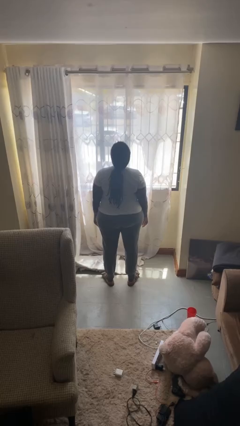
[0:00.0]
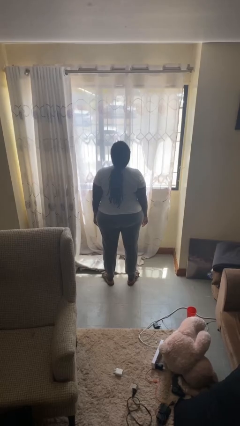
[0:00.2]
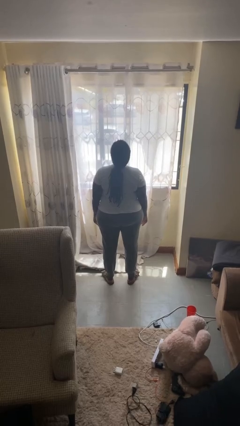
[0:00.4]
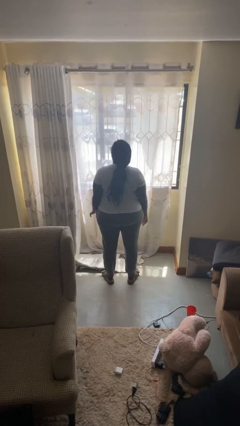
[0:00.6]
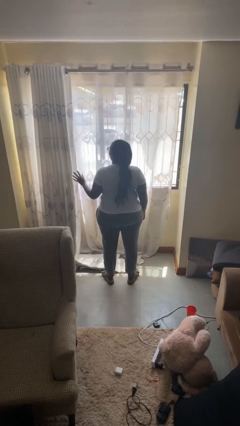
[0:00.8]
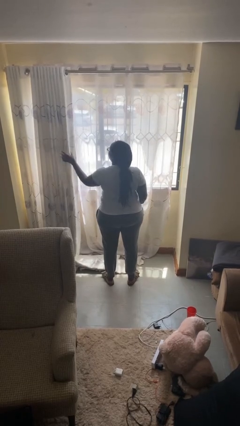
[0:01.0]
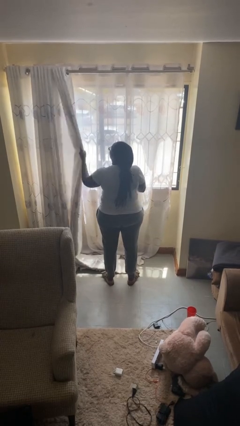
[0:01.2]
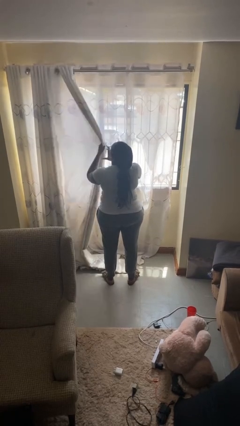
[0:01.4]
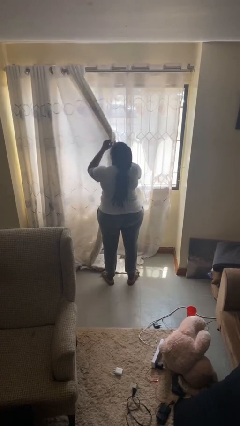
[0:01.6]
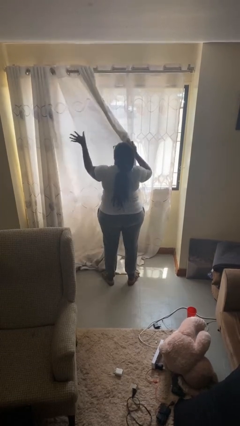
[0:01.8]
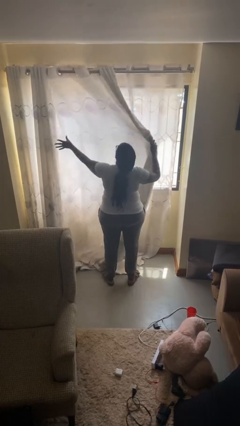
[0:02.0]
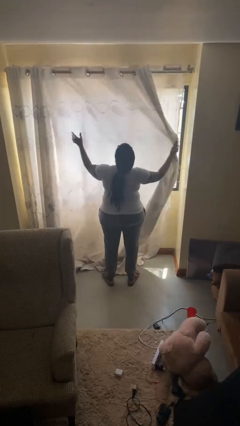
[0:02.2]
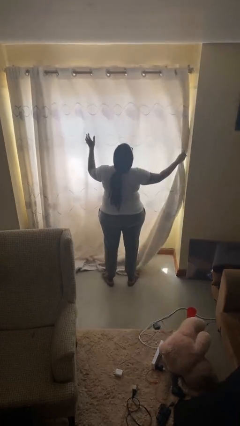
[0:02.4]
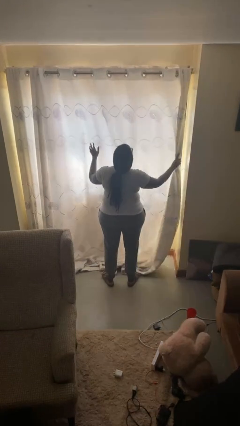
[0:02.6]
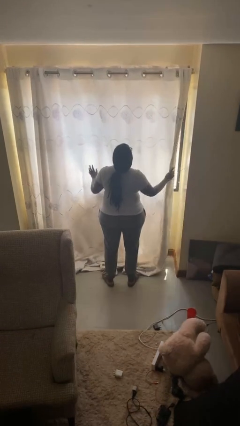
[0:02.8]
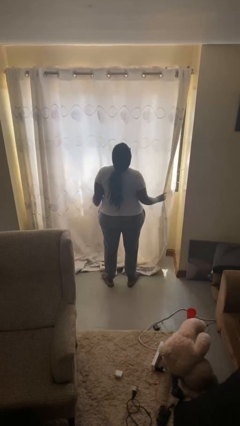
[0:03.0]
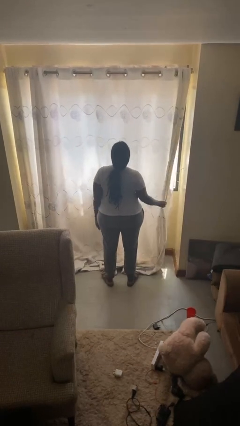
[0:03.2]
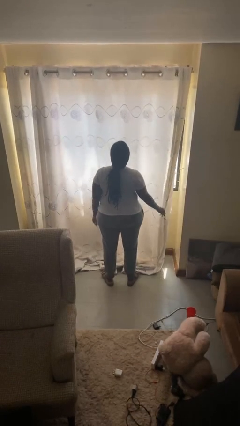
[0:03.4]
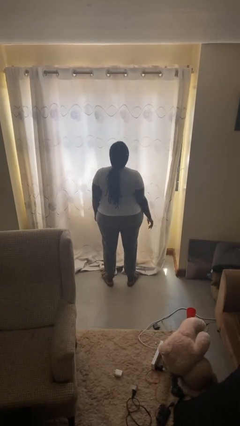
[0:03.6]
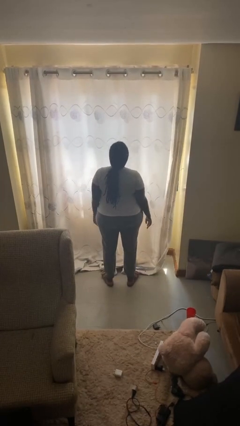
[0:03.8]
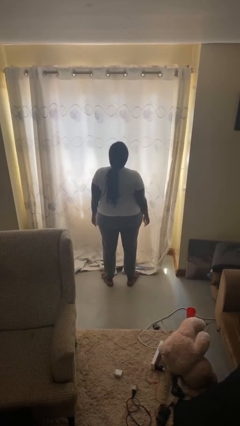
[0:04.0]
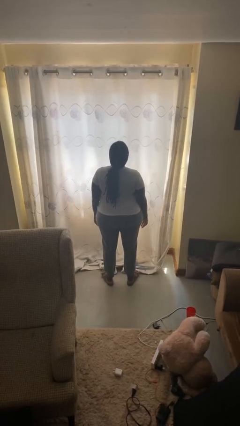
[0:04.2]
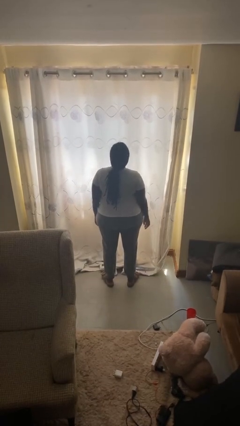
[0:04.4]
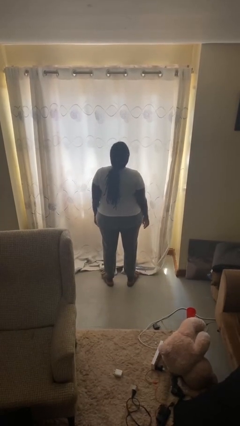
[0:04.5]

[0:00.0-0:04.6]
person closes curtains

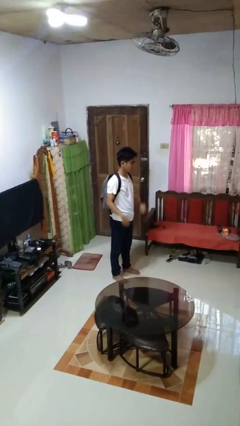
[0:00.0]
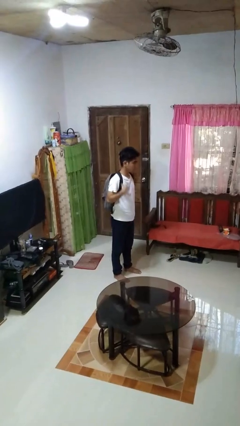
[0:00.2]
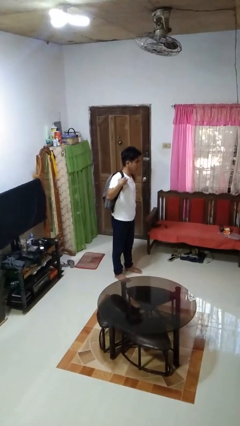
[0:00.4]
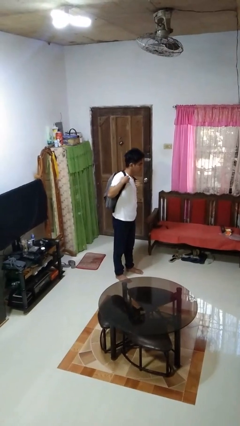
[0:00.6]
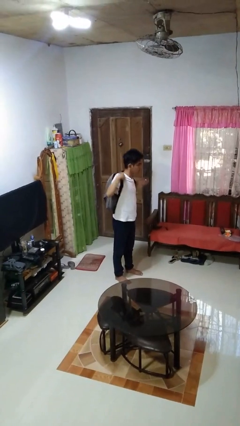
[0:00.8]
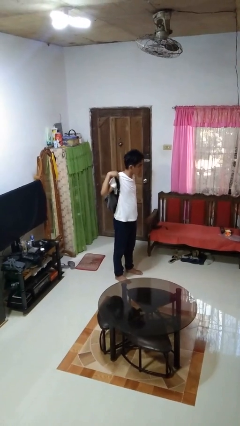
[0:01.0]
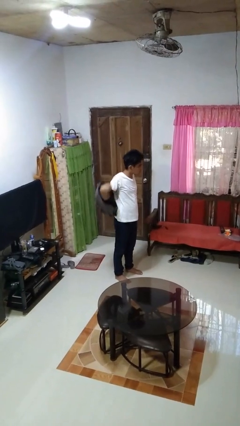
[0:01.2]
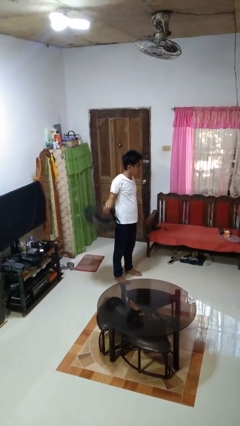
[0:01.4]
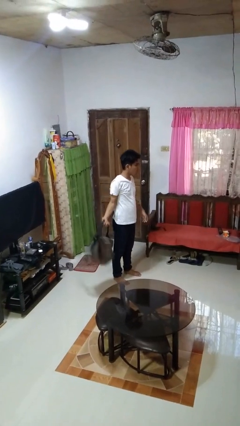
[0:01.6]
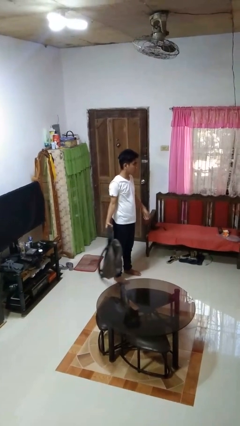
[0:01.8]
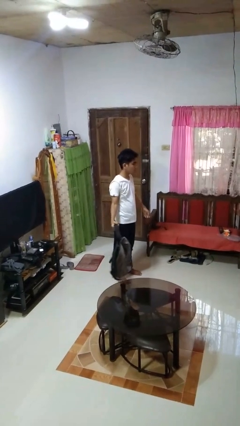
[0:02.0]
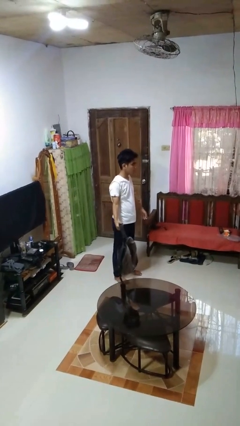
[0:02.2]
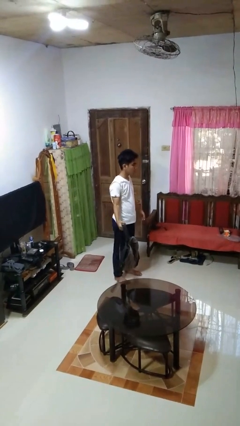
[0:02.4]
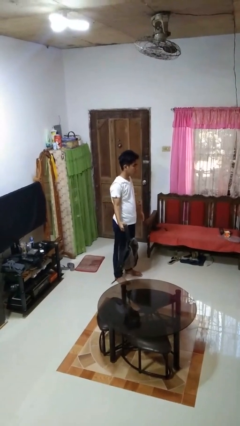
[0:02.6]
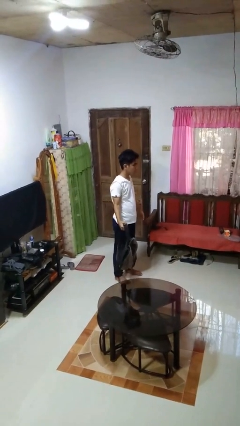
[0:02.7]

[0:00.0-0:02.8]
person takes off backpack

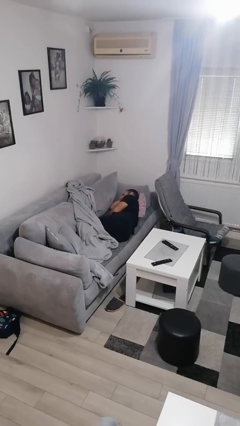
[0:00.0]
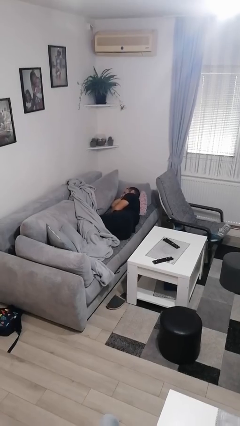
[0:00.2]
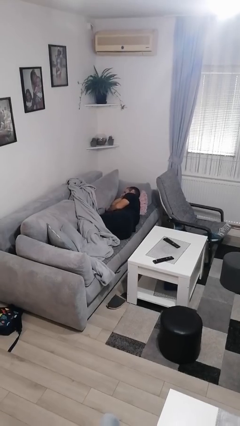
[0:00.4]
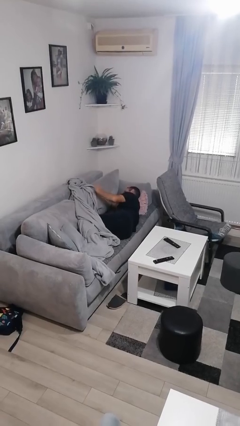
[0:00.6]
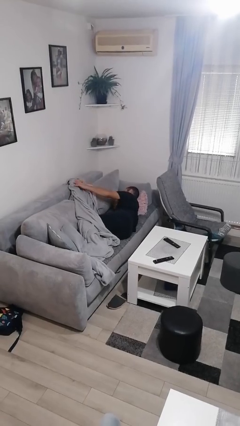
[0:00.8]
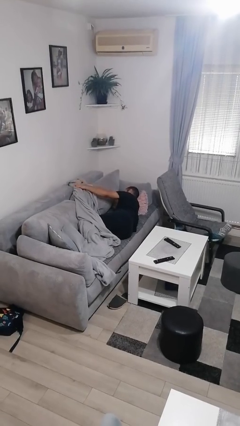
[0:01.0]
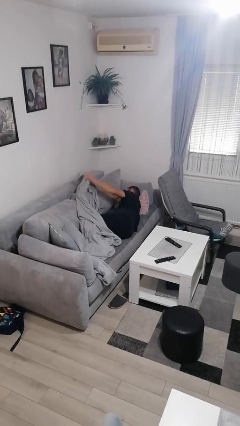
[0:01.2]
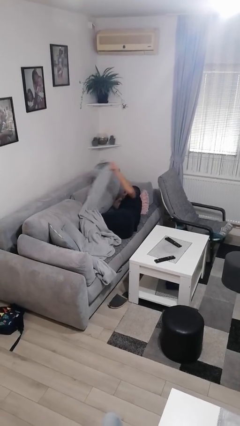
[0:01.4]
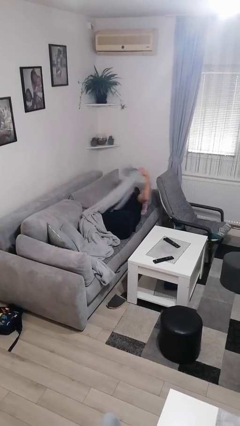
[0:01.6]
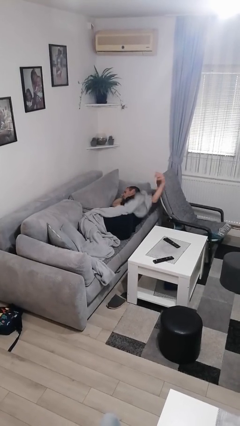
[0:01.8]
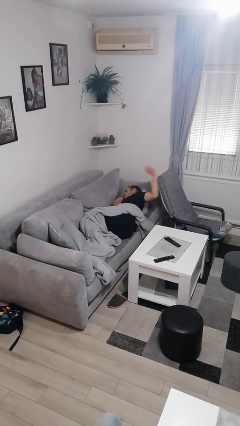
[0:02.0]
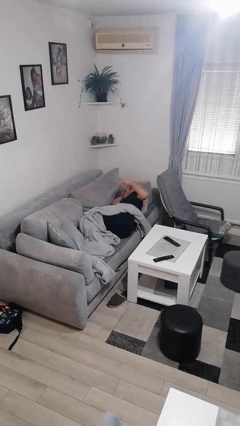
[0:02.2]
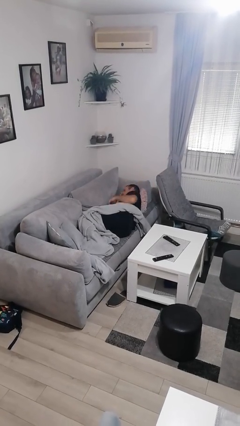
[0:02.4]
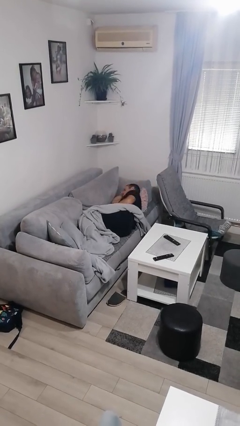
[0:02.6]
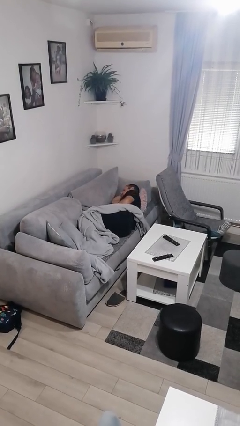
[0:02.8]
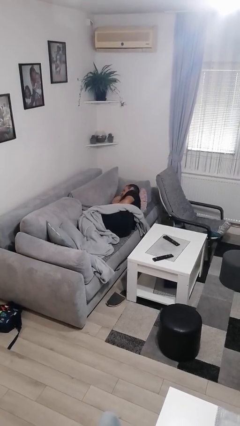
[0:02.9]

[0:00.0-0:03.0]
person covers with blanket

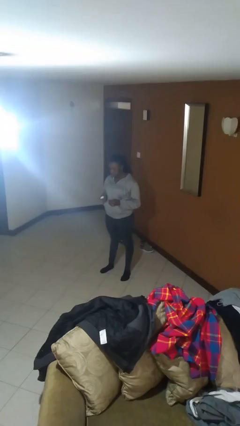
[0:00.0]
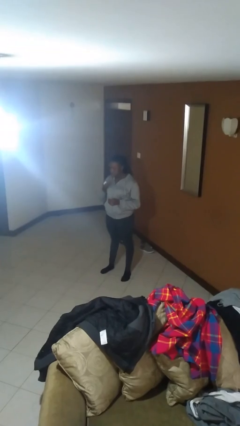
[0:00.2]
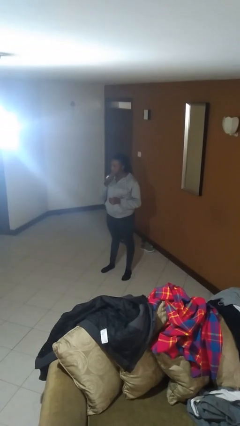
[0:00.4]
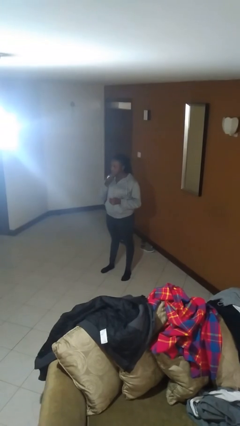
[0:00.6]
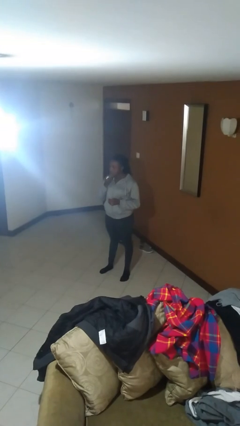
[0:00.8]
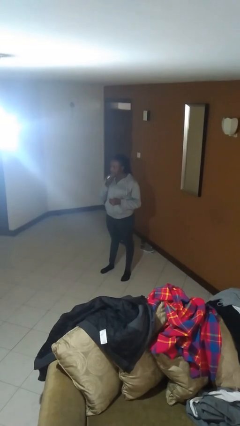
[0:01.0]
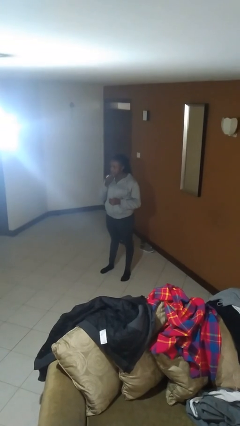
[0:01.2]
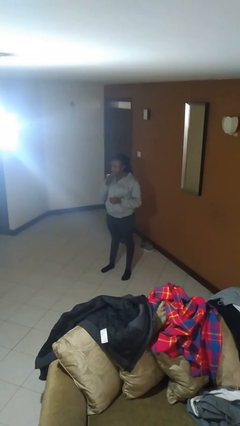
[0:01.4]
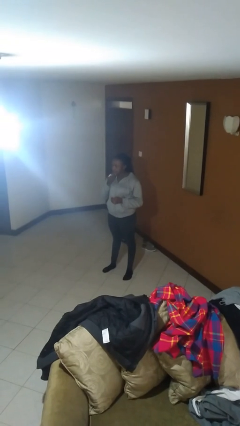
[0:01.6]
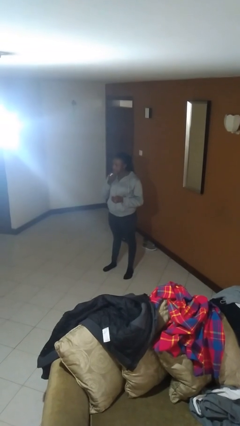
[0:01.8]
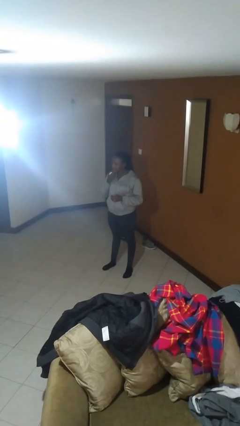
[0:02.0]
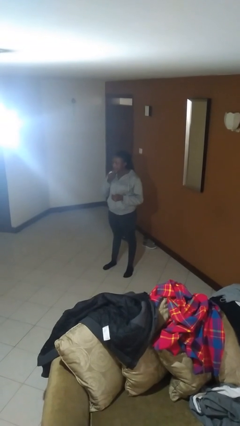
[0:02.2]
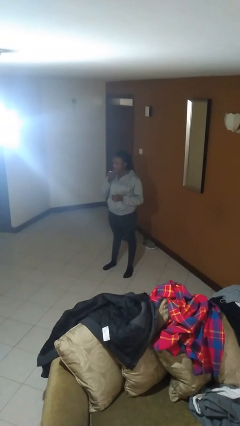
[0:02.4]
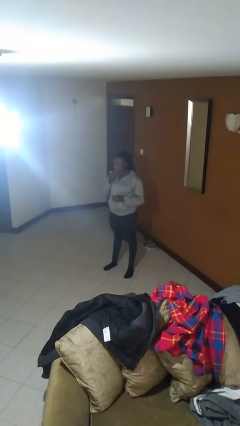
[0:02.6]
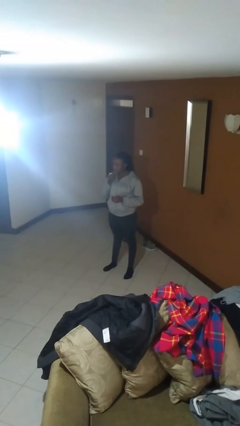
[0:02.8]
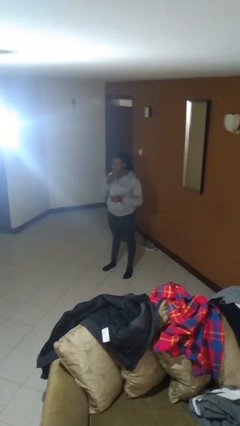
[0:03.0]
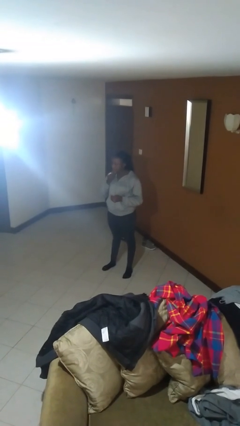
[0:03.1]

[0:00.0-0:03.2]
person applies lip makeup

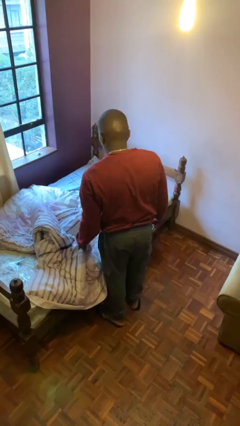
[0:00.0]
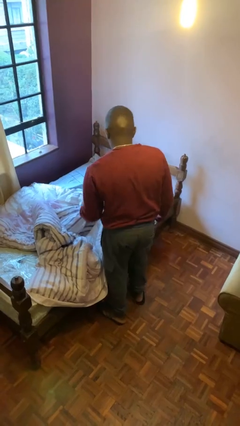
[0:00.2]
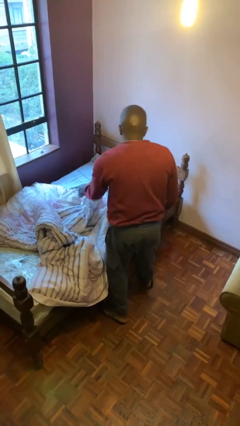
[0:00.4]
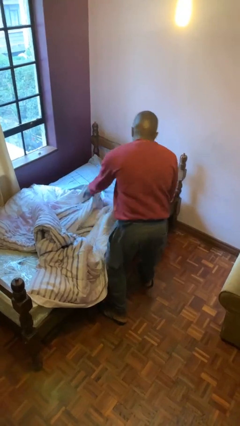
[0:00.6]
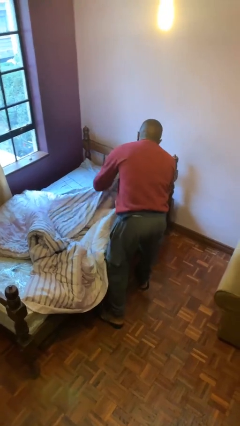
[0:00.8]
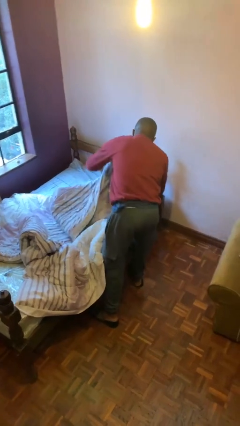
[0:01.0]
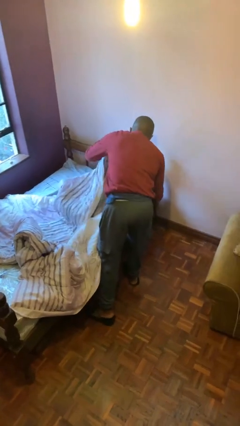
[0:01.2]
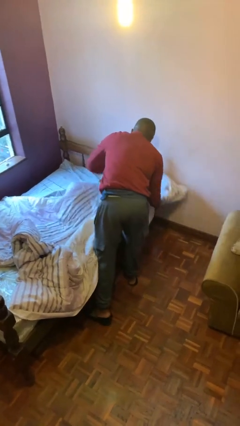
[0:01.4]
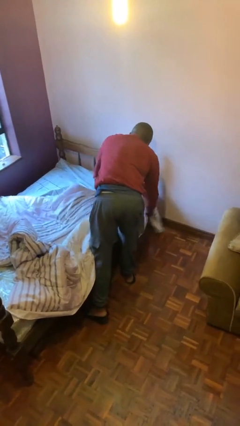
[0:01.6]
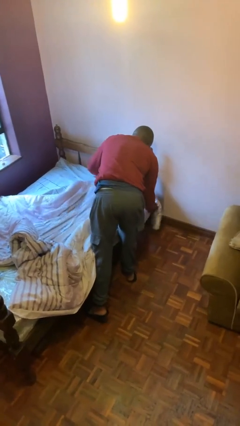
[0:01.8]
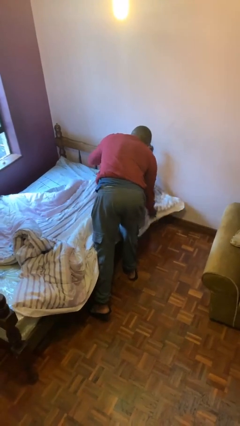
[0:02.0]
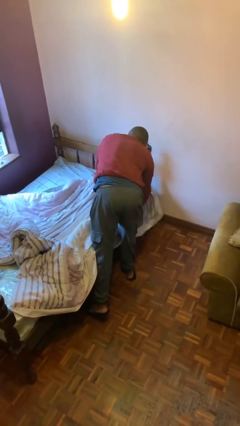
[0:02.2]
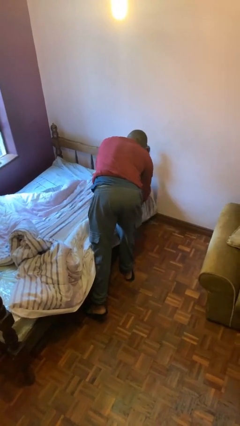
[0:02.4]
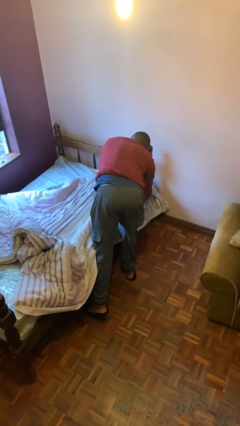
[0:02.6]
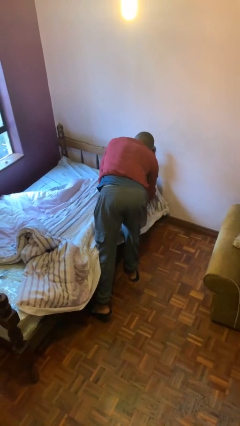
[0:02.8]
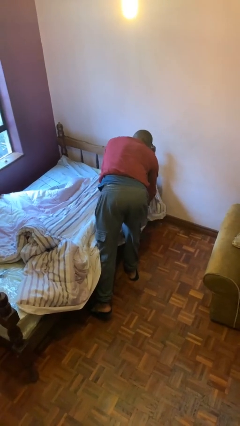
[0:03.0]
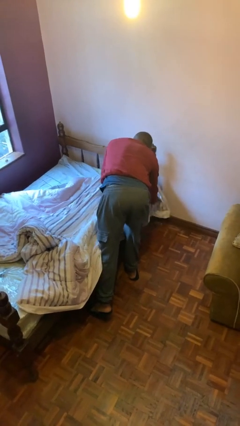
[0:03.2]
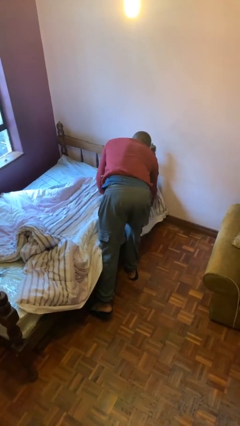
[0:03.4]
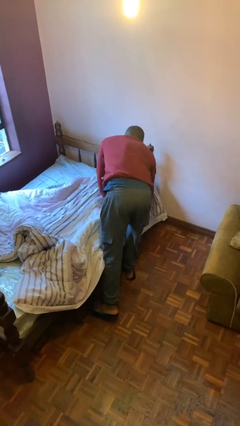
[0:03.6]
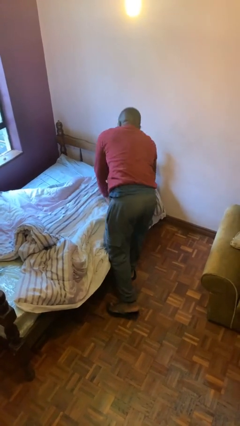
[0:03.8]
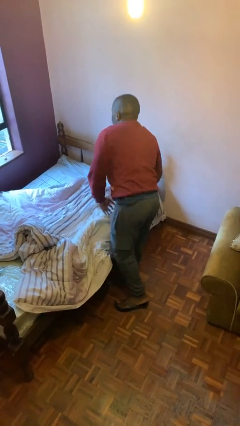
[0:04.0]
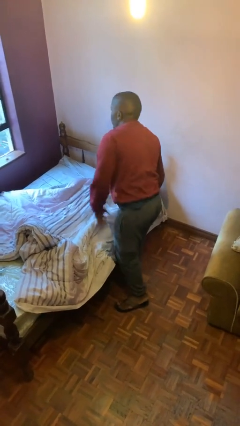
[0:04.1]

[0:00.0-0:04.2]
person makes bed
